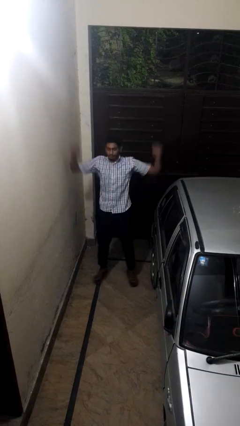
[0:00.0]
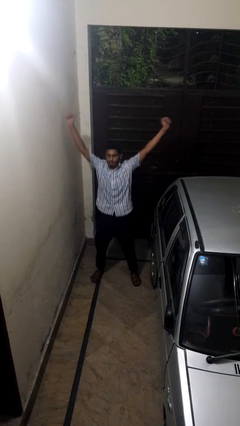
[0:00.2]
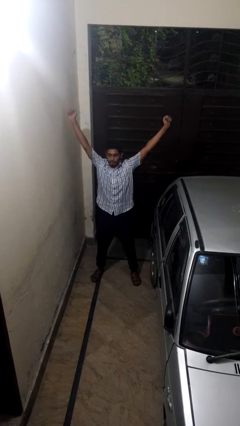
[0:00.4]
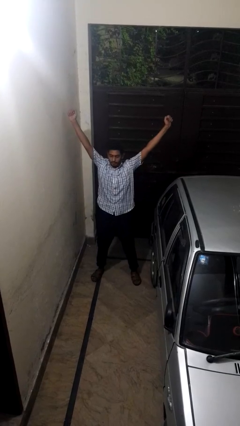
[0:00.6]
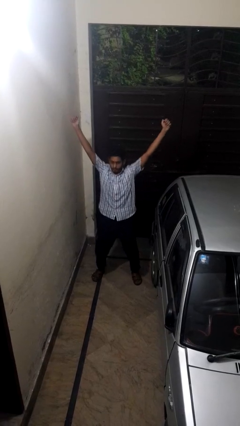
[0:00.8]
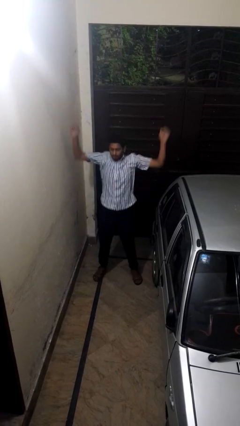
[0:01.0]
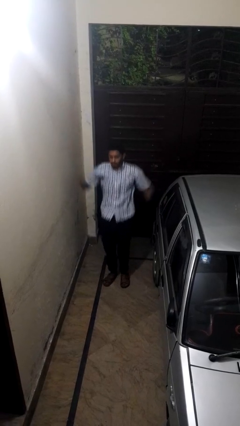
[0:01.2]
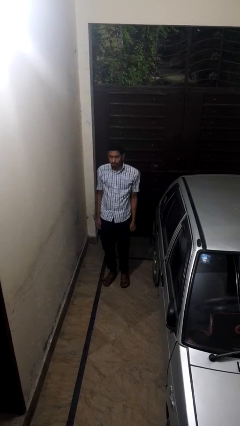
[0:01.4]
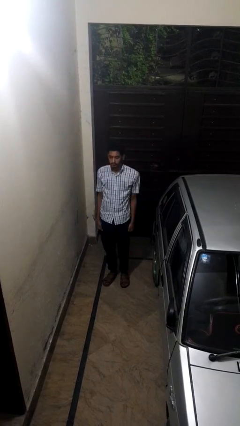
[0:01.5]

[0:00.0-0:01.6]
person exercises with jumping jacks

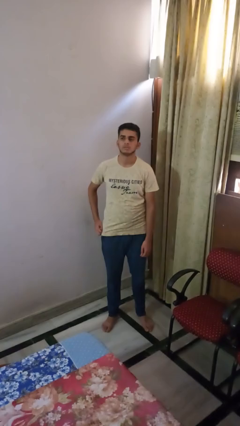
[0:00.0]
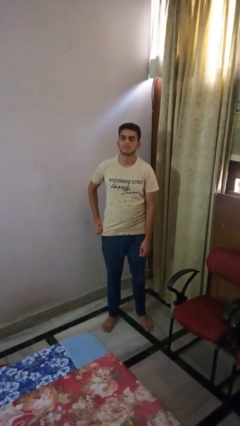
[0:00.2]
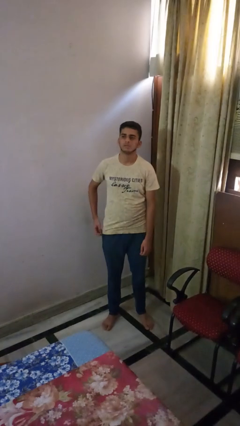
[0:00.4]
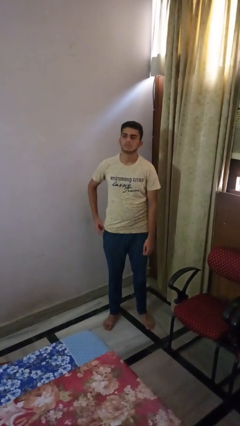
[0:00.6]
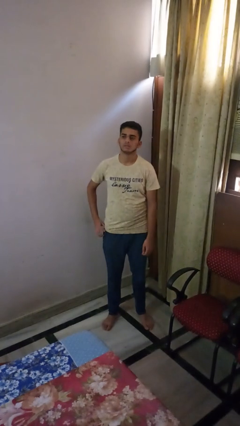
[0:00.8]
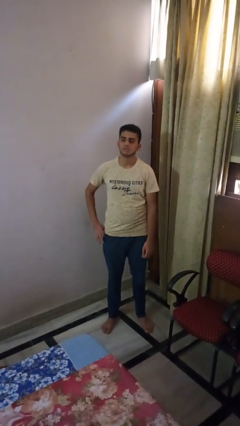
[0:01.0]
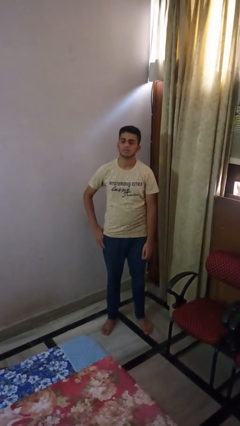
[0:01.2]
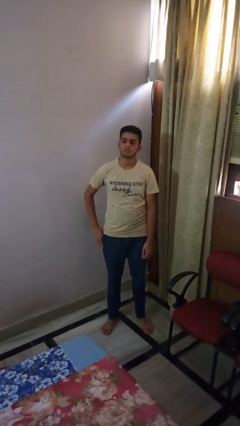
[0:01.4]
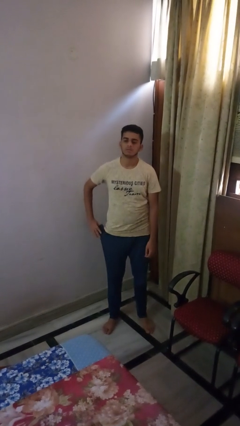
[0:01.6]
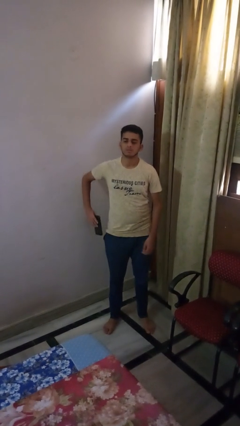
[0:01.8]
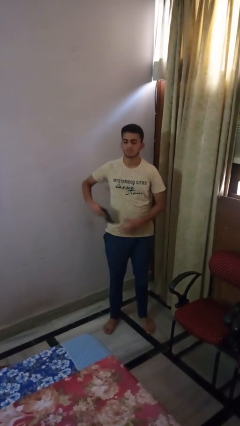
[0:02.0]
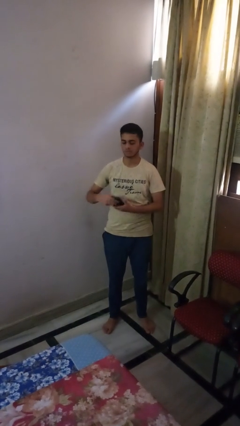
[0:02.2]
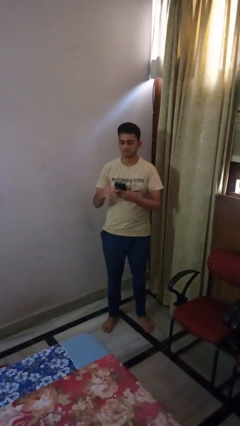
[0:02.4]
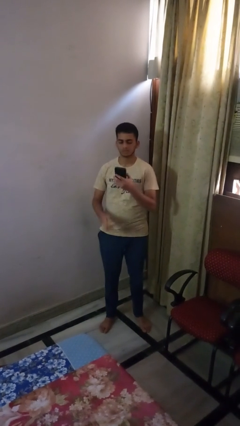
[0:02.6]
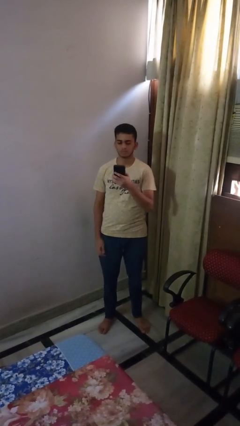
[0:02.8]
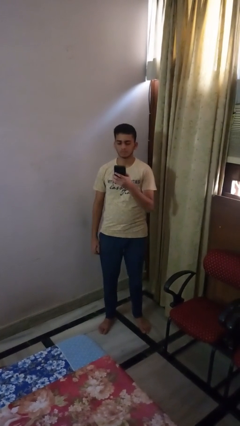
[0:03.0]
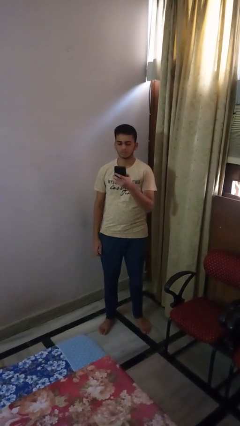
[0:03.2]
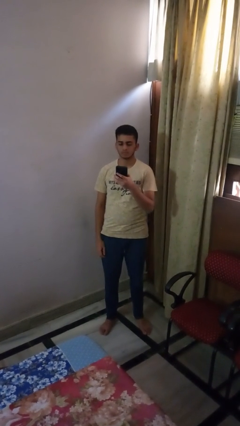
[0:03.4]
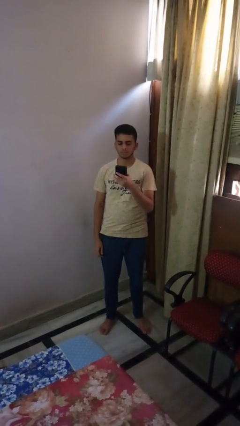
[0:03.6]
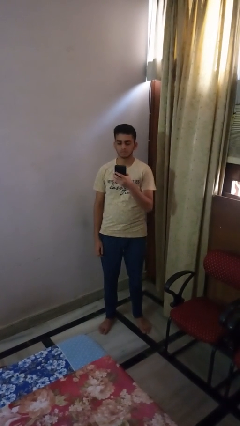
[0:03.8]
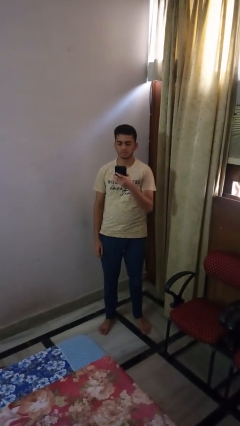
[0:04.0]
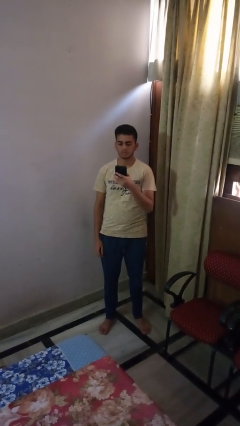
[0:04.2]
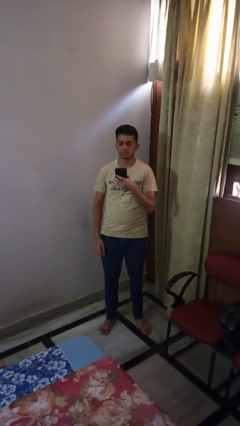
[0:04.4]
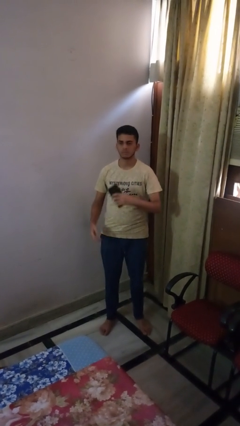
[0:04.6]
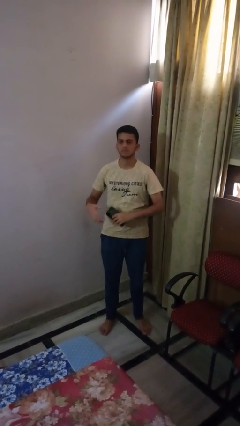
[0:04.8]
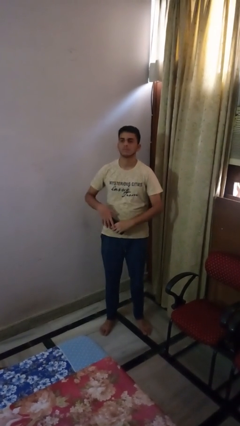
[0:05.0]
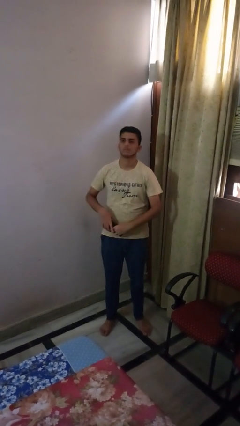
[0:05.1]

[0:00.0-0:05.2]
person takes phone from pocket

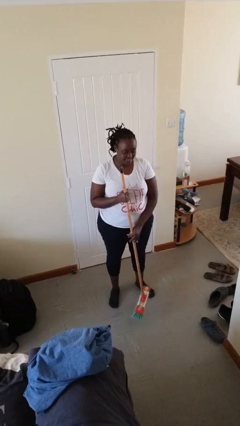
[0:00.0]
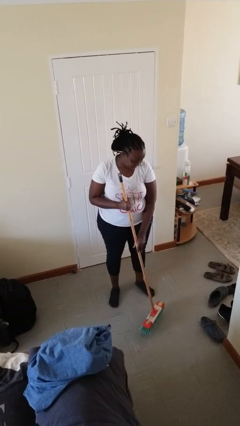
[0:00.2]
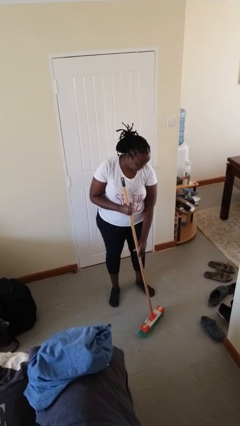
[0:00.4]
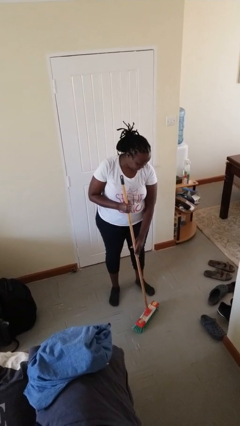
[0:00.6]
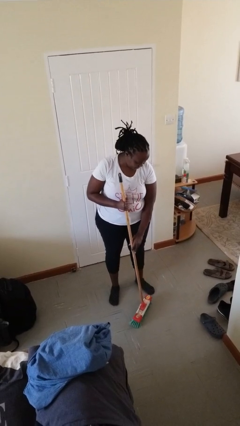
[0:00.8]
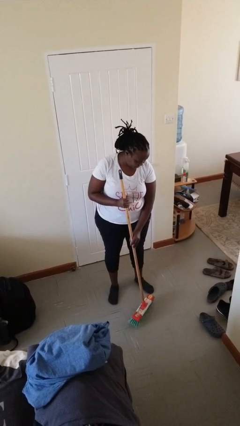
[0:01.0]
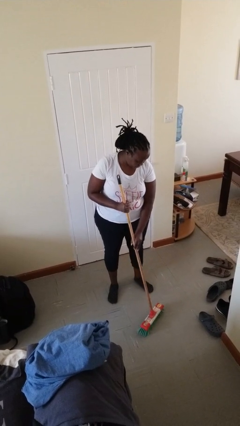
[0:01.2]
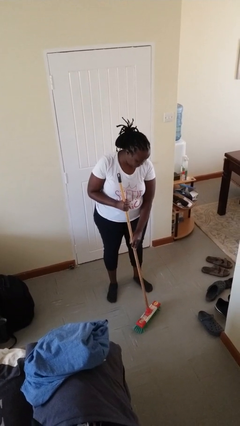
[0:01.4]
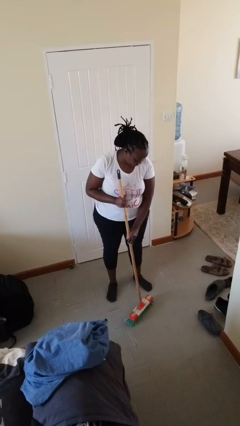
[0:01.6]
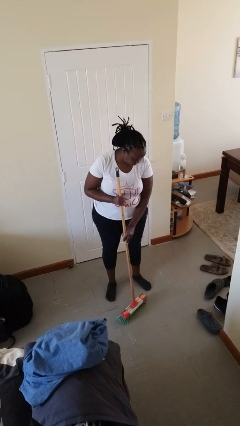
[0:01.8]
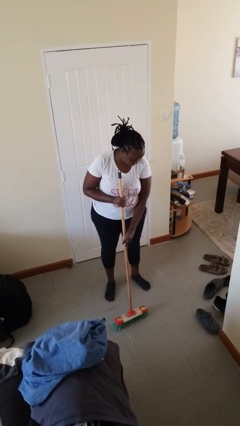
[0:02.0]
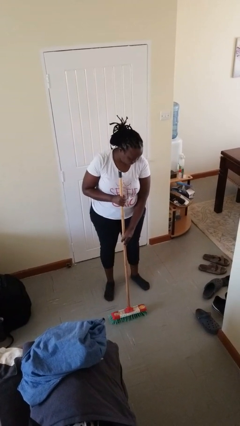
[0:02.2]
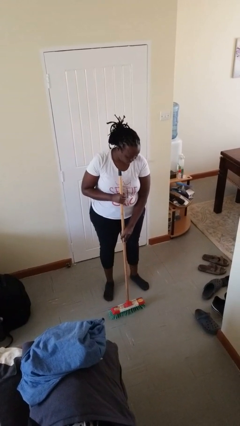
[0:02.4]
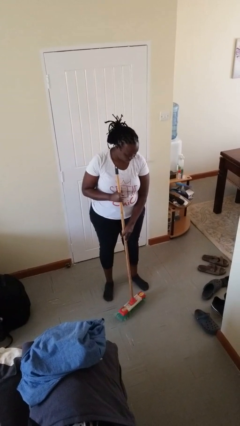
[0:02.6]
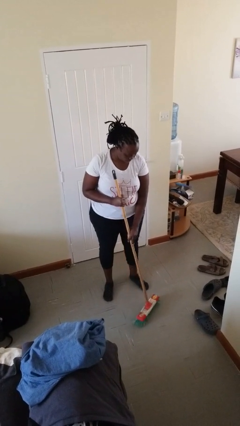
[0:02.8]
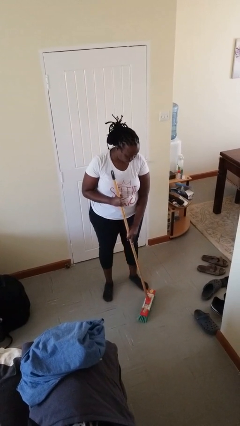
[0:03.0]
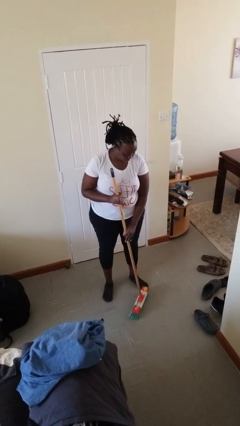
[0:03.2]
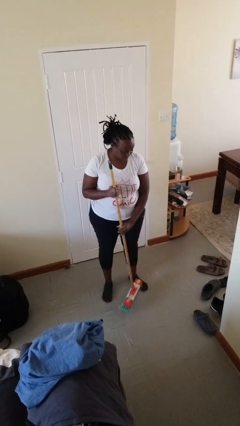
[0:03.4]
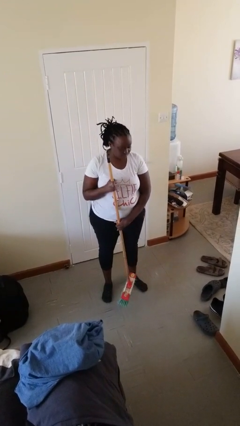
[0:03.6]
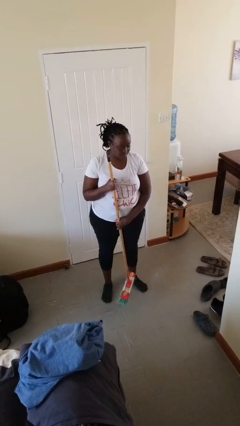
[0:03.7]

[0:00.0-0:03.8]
person sweeps floor

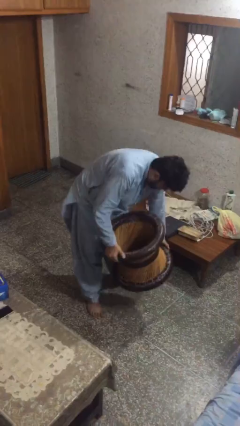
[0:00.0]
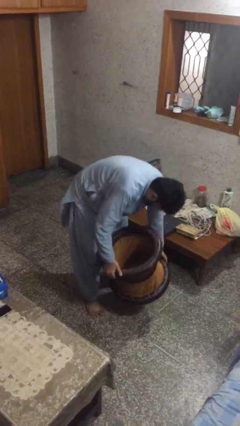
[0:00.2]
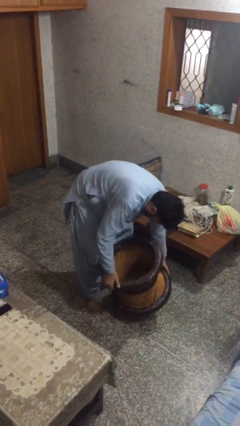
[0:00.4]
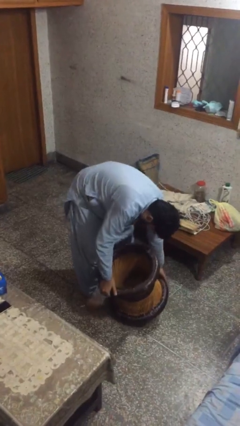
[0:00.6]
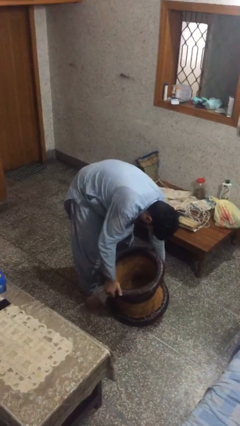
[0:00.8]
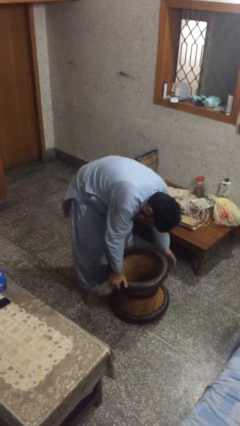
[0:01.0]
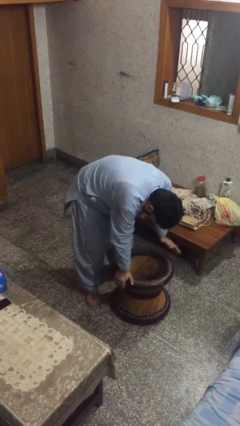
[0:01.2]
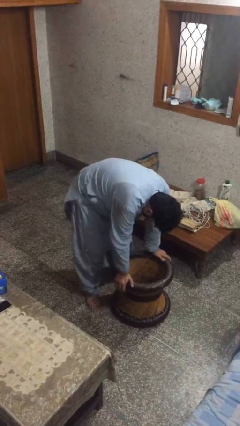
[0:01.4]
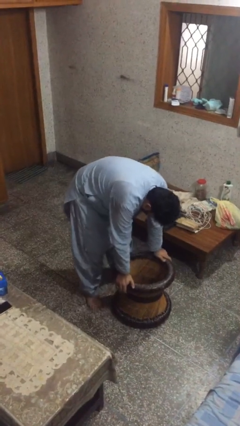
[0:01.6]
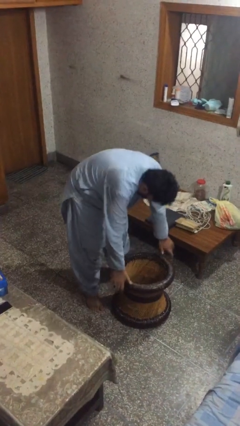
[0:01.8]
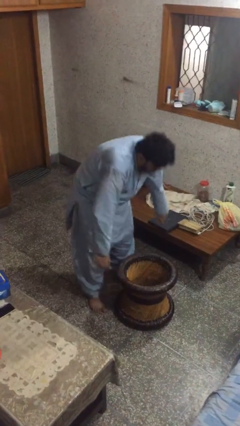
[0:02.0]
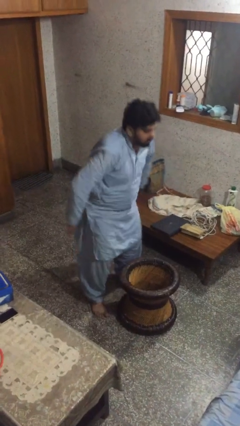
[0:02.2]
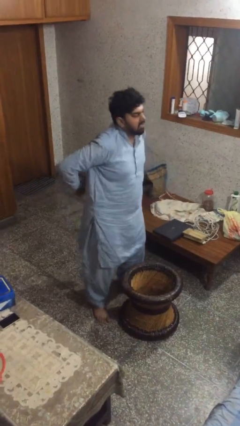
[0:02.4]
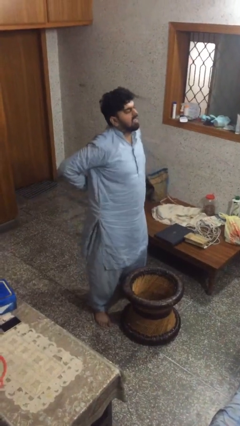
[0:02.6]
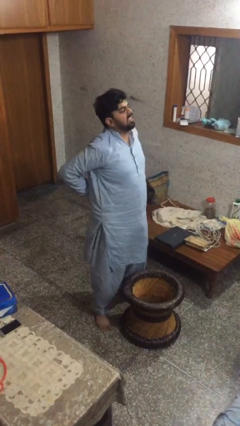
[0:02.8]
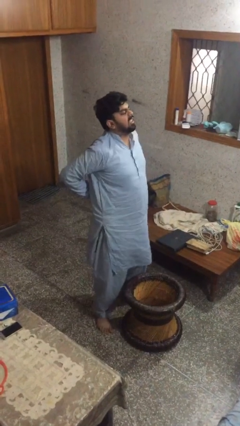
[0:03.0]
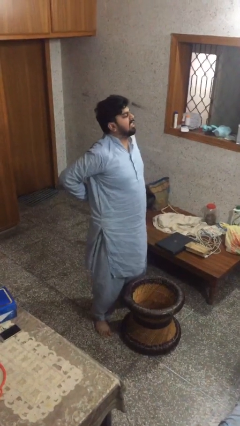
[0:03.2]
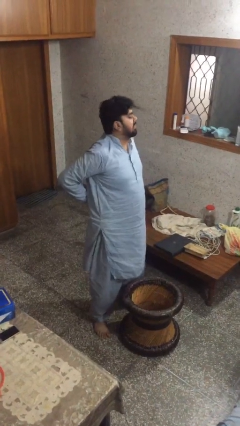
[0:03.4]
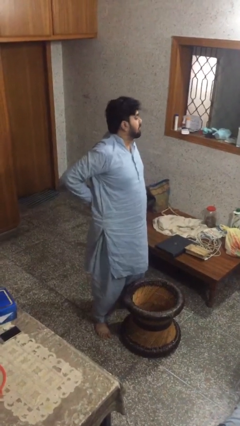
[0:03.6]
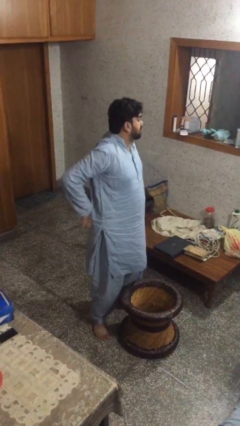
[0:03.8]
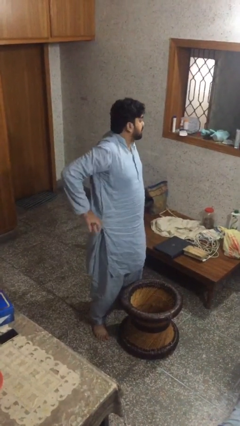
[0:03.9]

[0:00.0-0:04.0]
person puts down object on floor

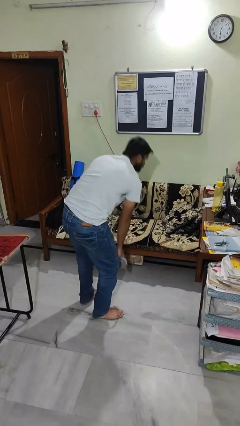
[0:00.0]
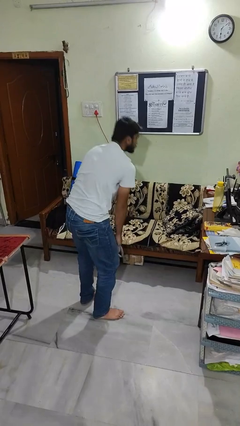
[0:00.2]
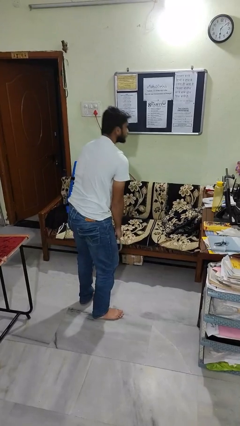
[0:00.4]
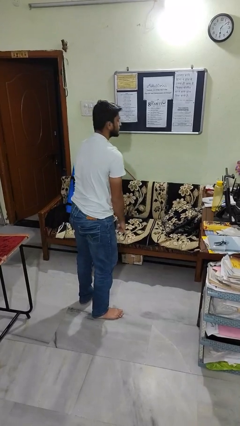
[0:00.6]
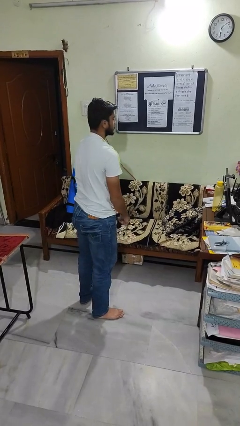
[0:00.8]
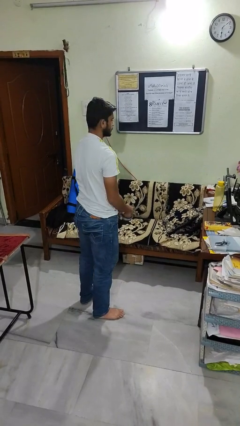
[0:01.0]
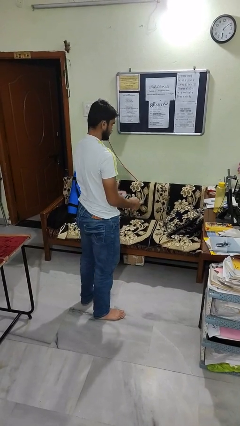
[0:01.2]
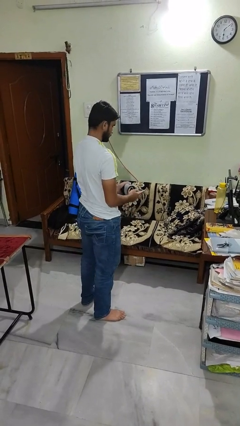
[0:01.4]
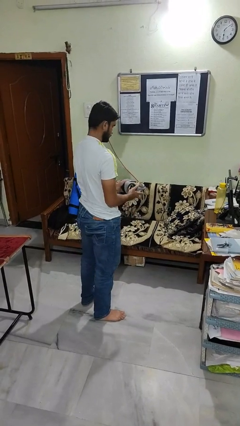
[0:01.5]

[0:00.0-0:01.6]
person picks up object from floor

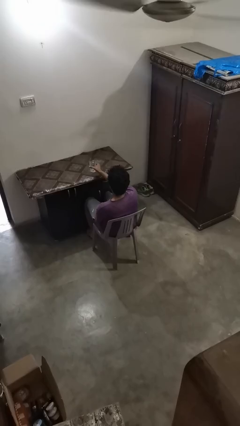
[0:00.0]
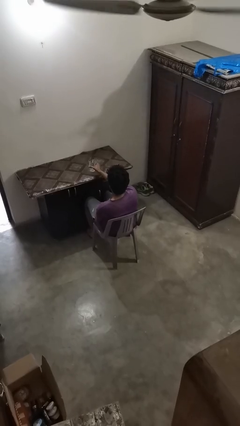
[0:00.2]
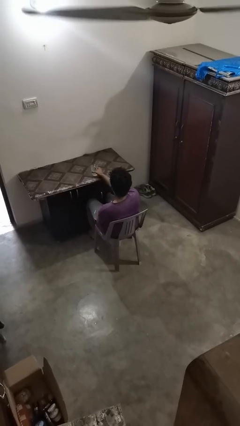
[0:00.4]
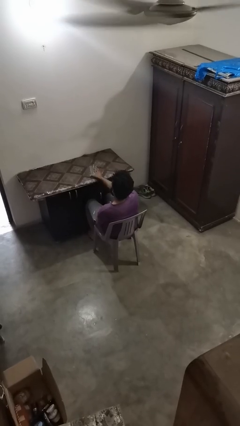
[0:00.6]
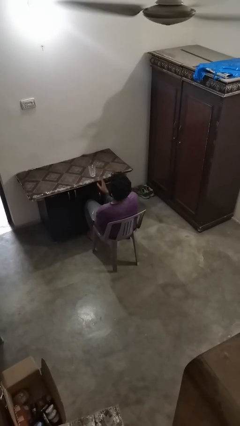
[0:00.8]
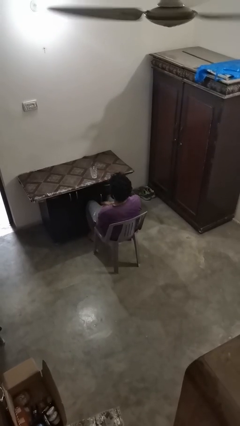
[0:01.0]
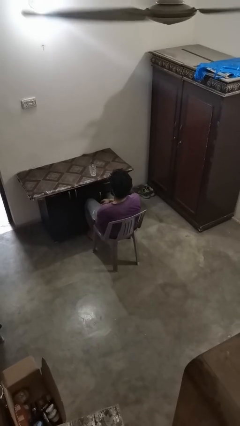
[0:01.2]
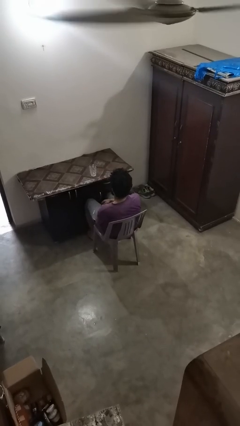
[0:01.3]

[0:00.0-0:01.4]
person sets upright glass
